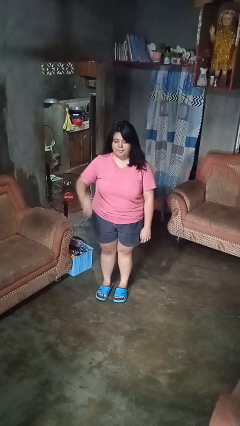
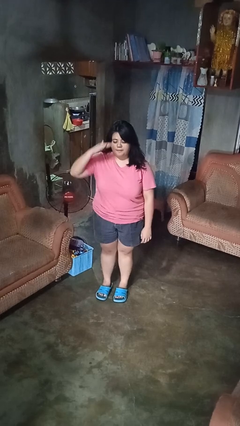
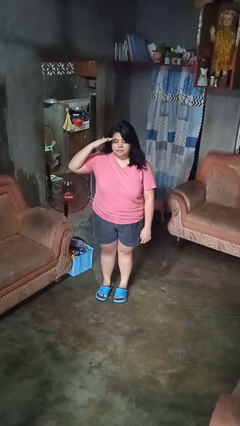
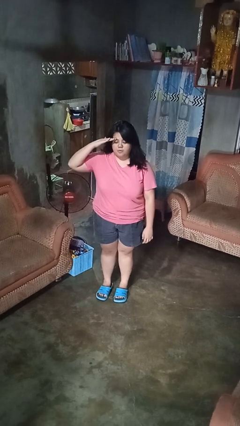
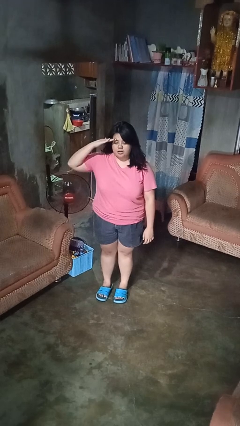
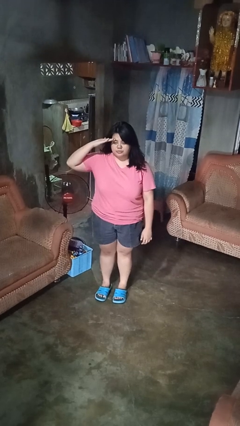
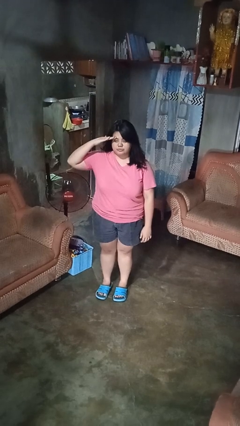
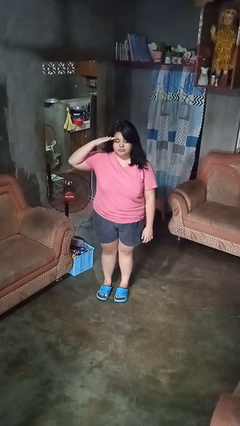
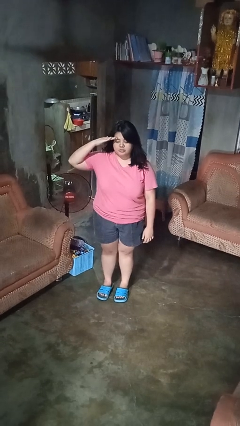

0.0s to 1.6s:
person salutes

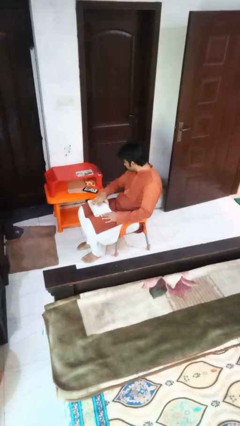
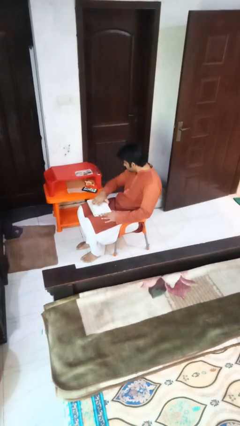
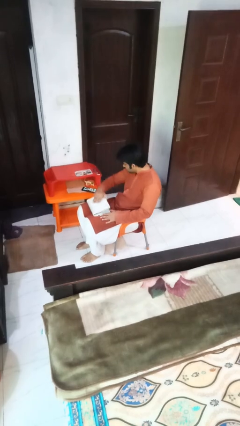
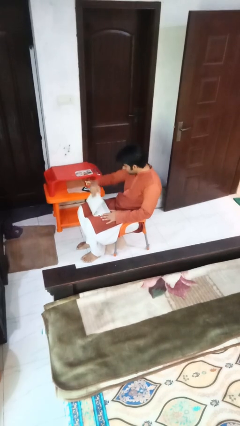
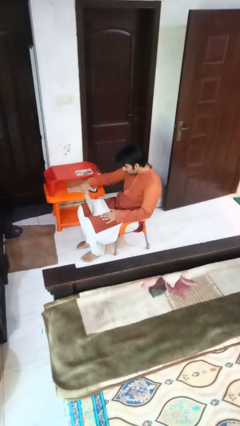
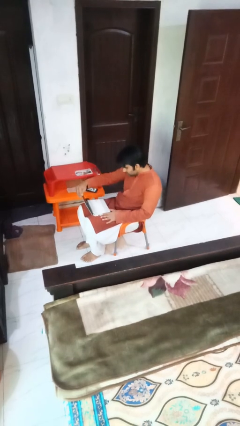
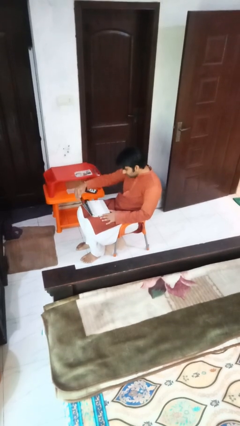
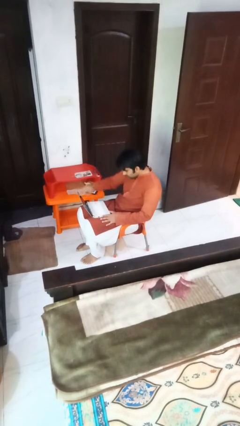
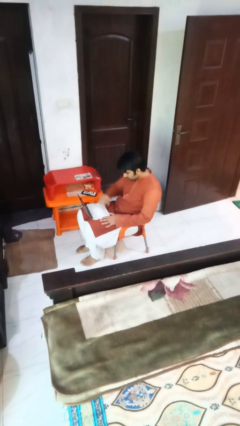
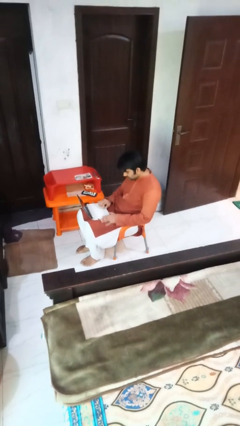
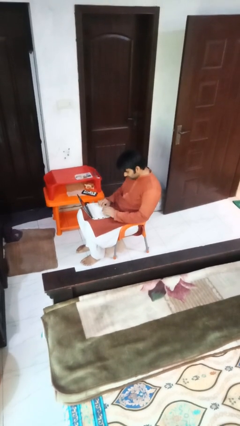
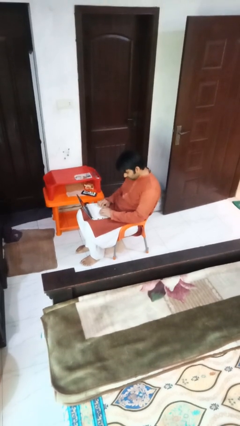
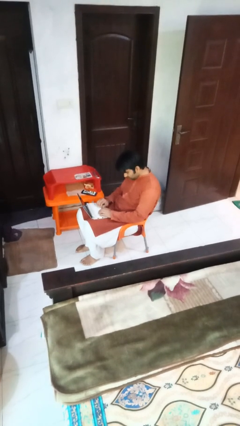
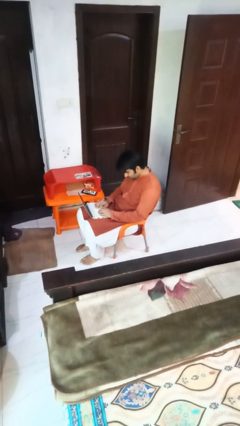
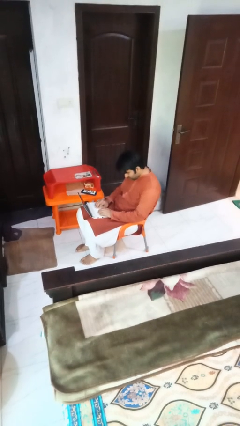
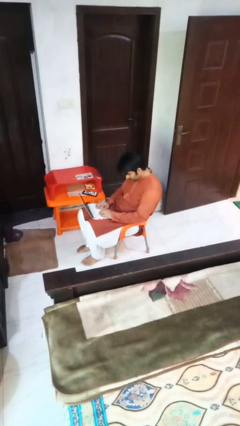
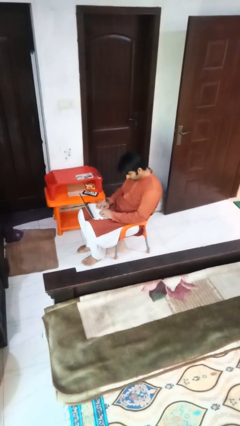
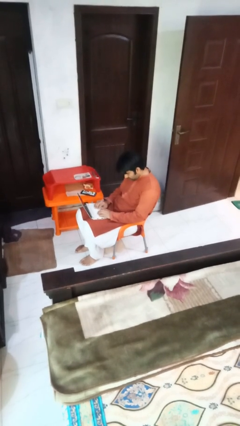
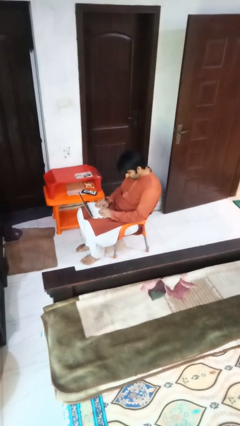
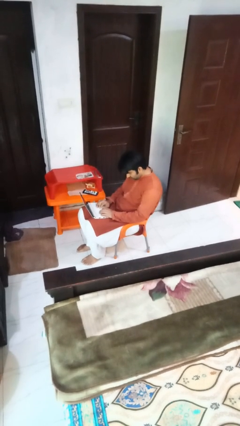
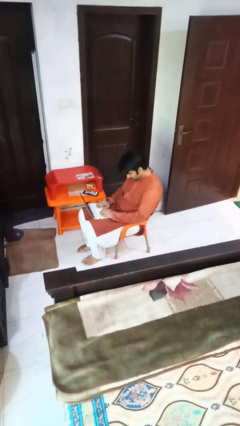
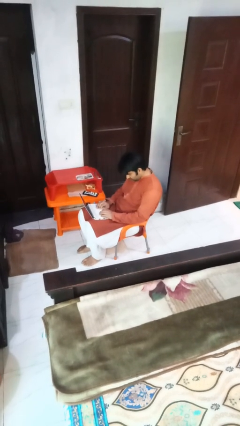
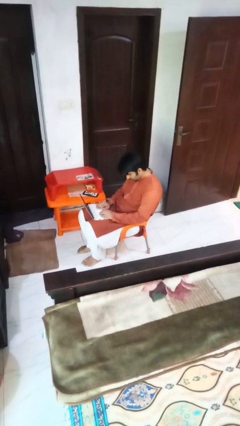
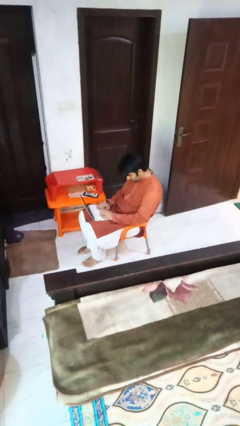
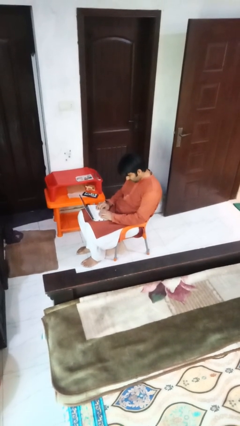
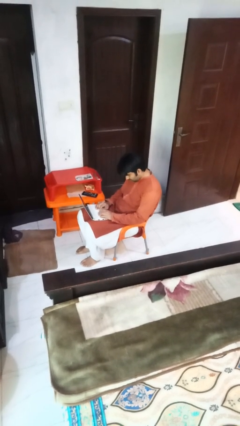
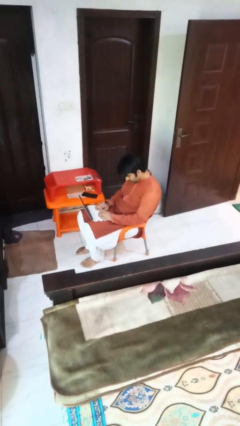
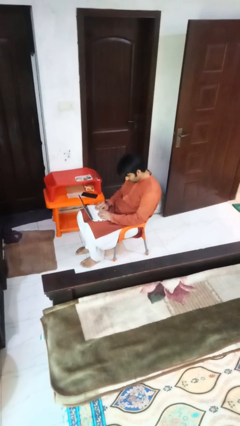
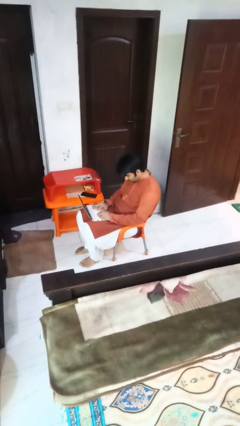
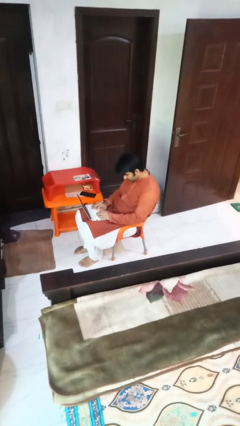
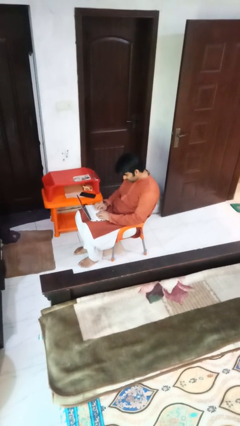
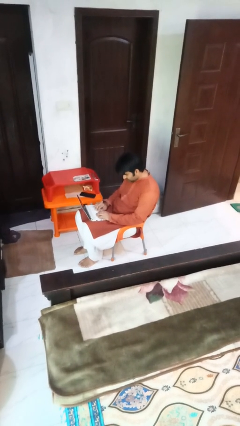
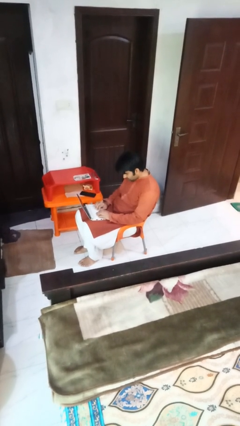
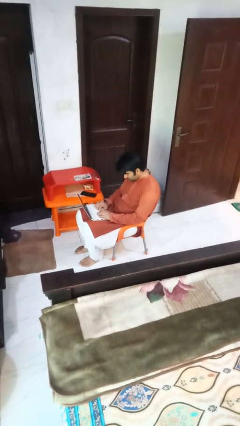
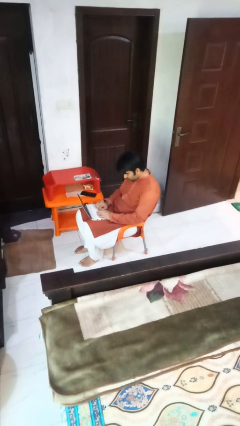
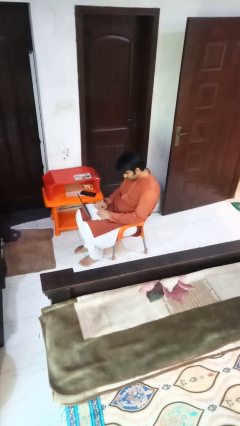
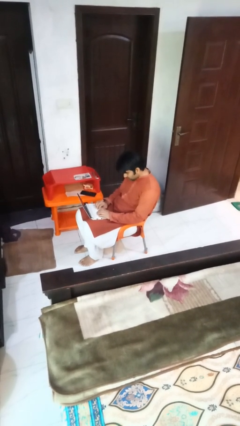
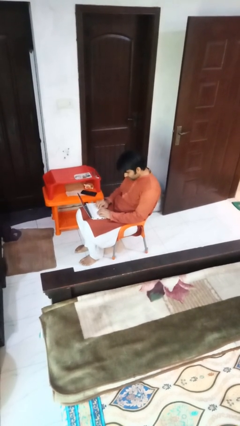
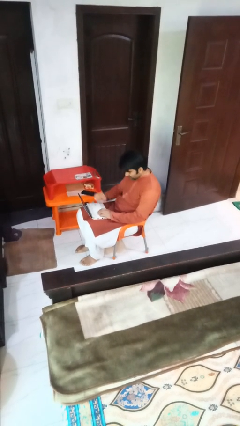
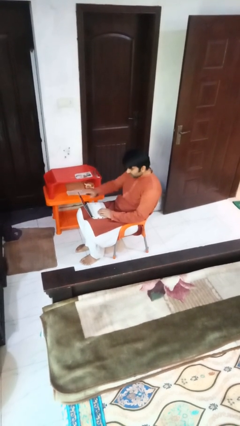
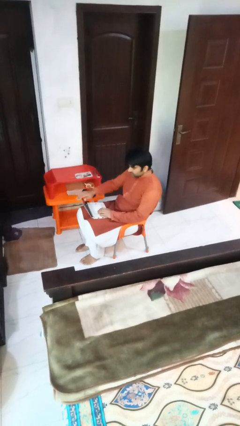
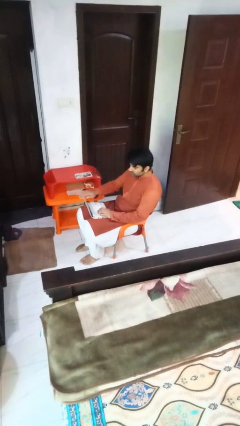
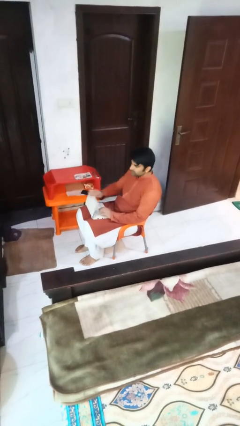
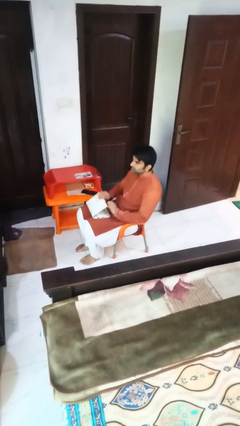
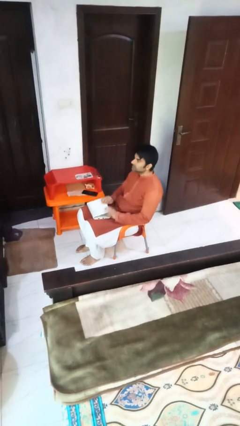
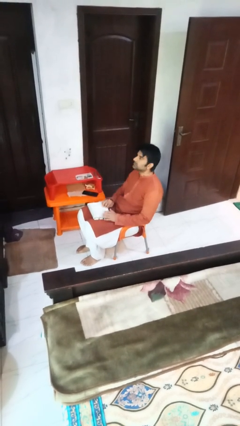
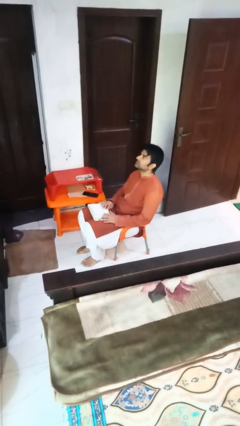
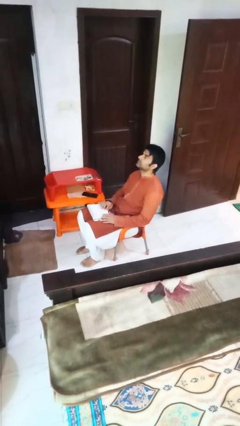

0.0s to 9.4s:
person interacts with laptop

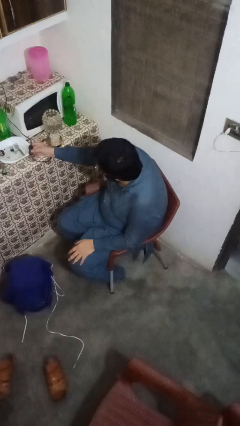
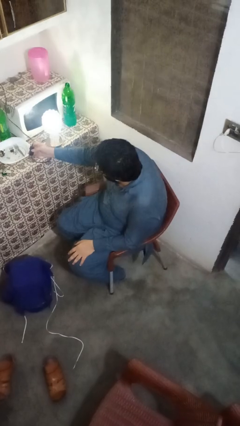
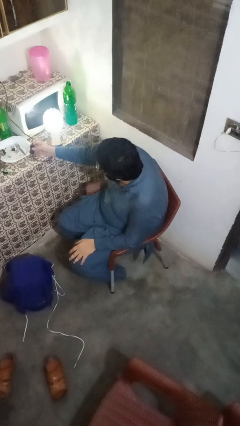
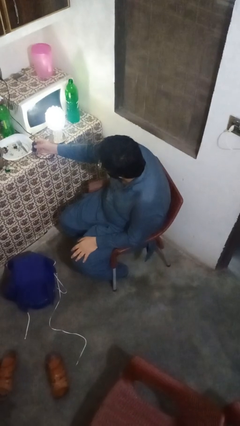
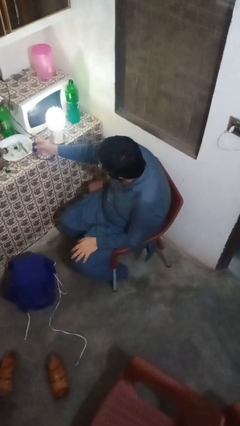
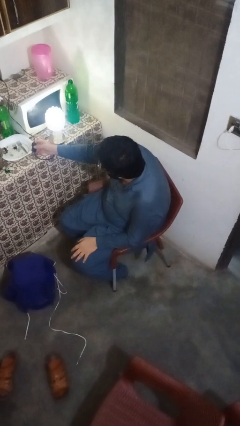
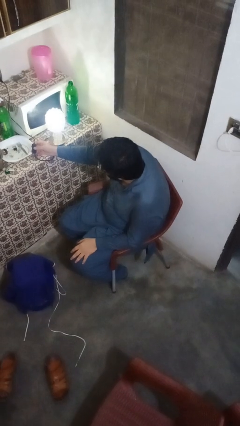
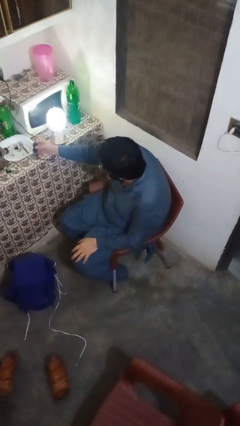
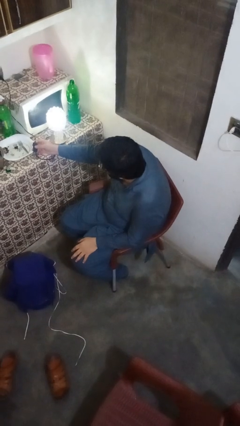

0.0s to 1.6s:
person turns on lamp

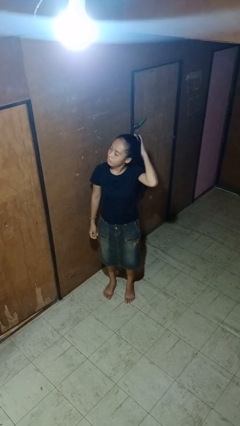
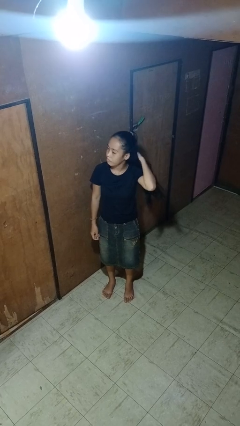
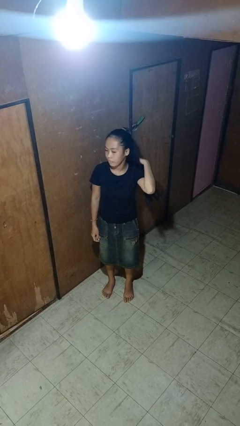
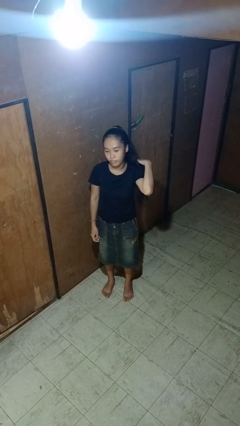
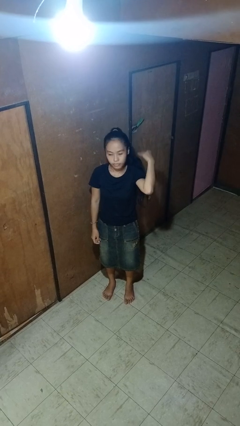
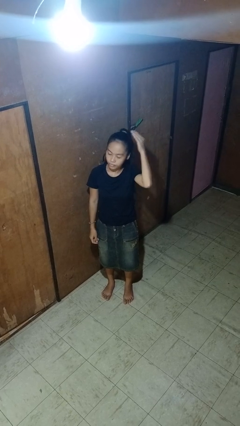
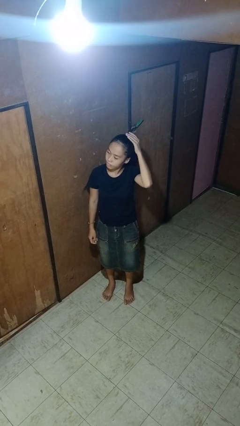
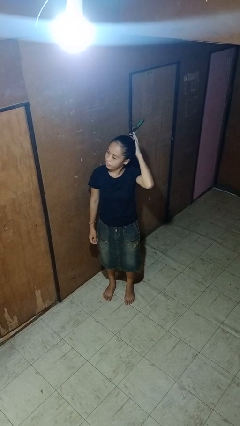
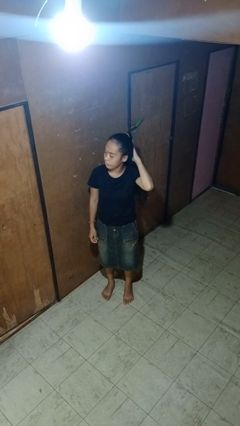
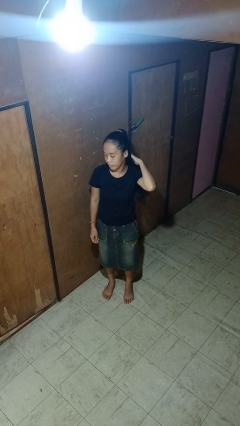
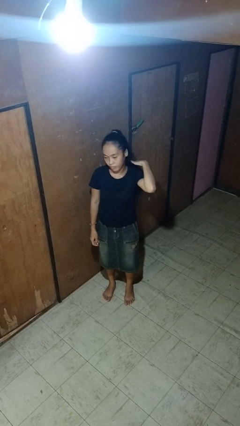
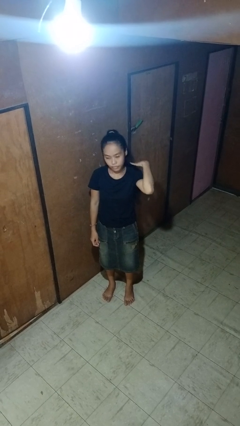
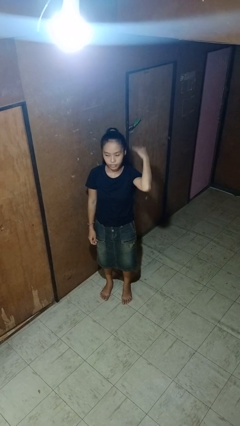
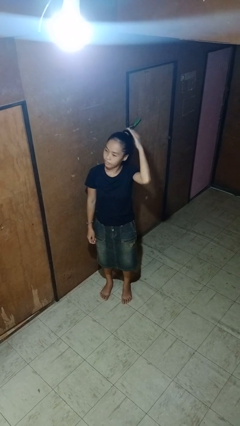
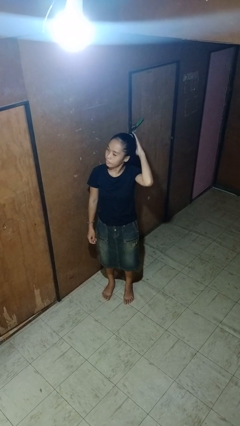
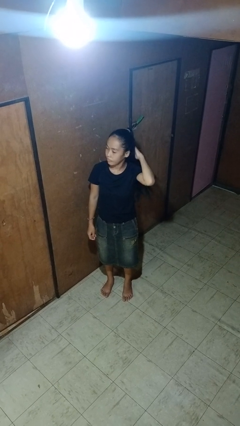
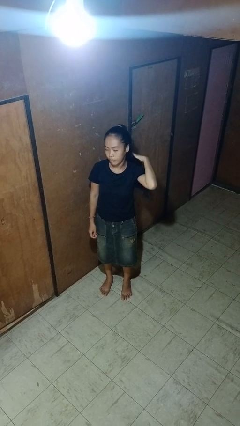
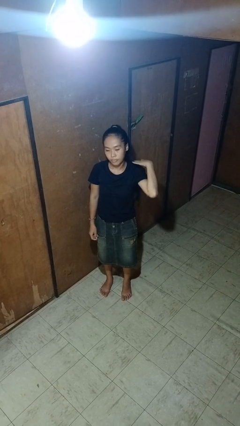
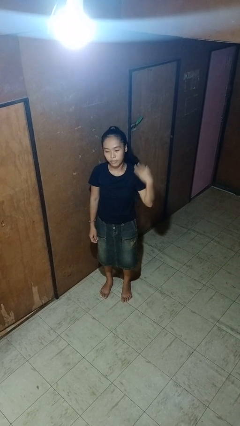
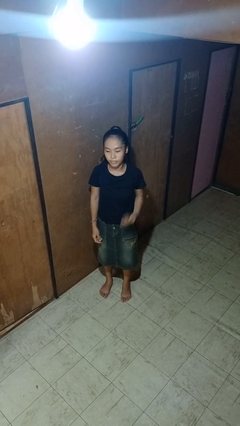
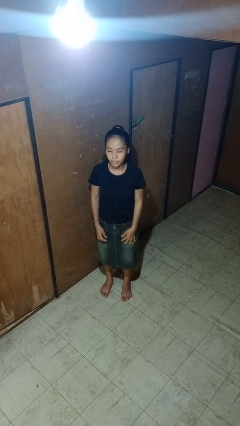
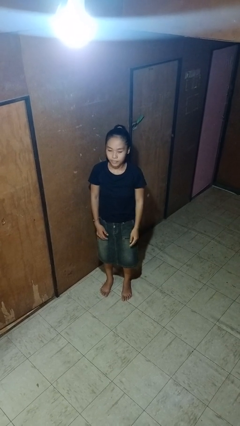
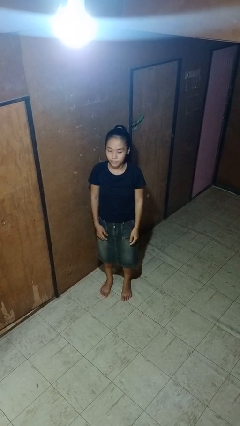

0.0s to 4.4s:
person strokes hair

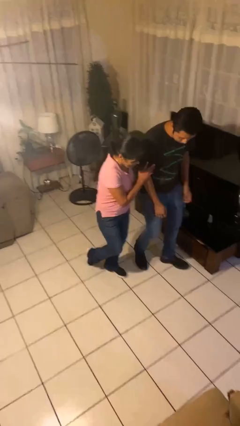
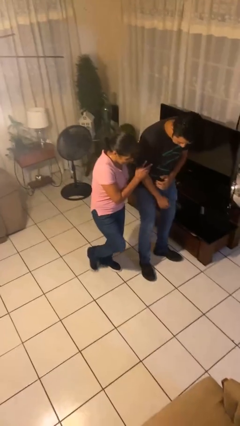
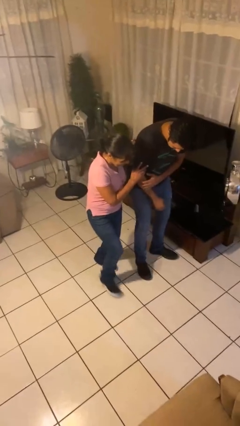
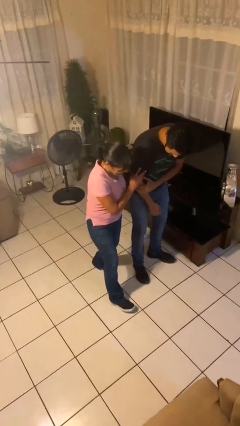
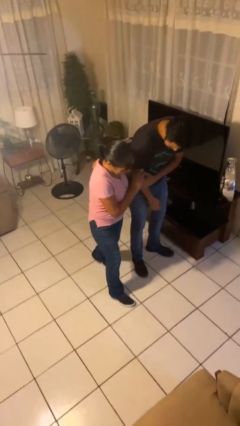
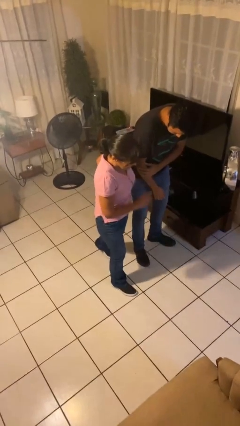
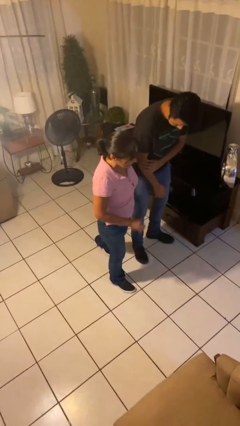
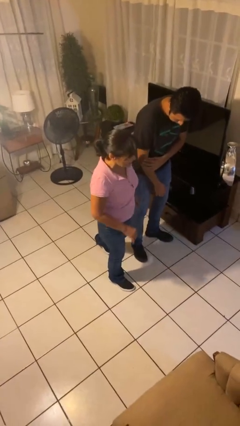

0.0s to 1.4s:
person bumps into person
